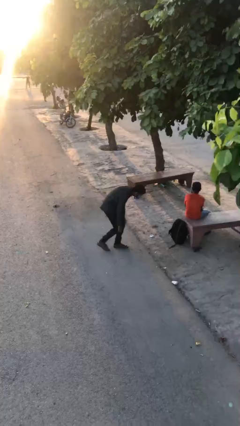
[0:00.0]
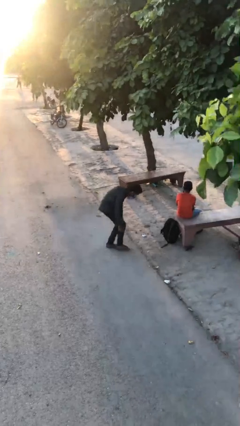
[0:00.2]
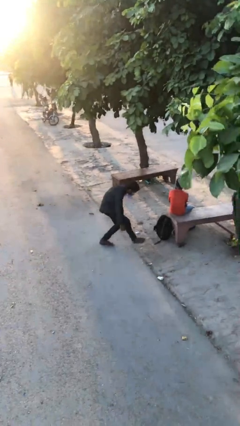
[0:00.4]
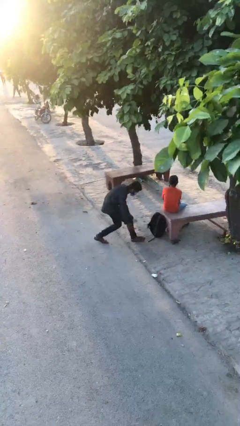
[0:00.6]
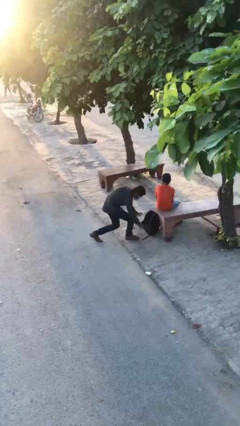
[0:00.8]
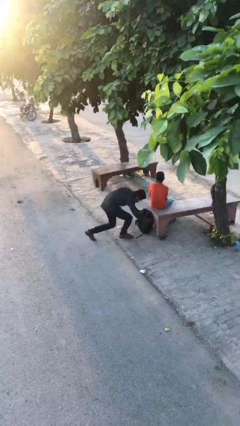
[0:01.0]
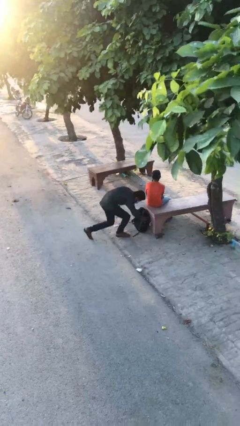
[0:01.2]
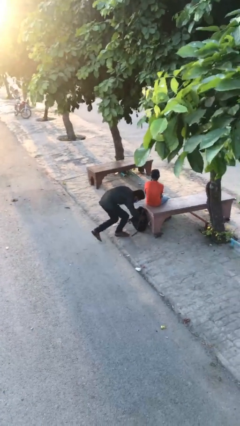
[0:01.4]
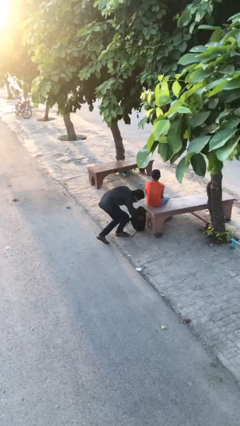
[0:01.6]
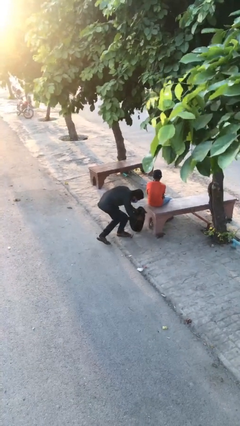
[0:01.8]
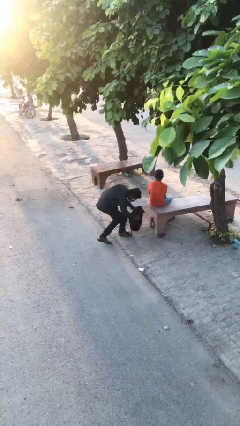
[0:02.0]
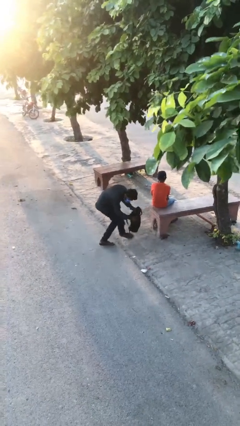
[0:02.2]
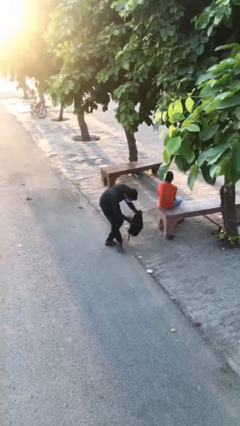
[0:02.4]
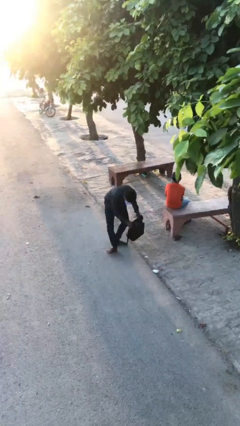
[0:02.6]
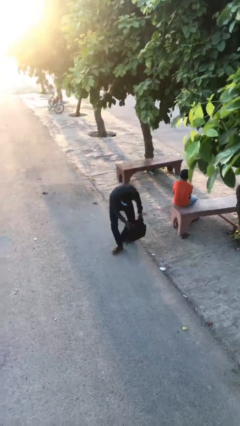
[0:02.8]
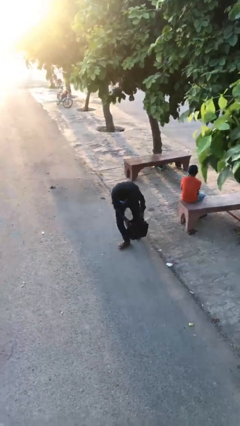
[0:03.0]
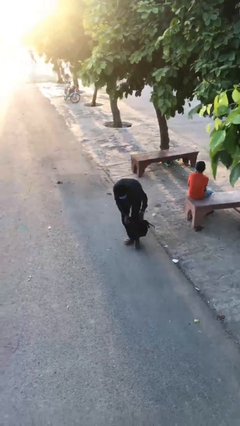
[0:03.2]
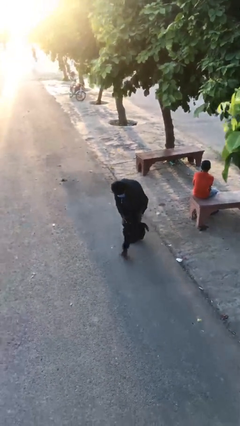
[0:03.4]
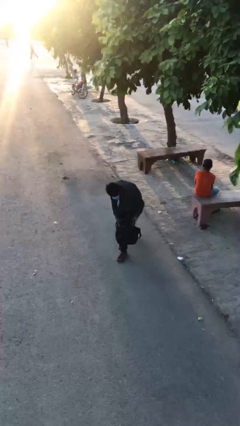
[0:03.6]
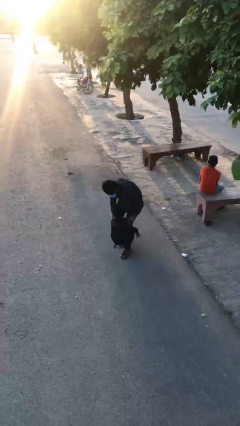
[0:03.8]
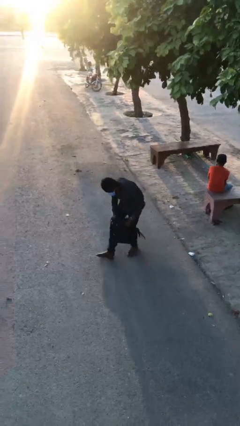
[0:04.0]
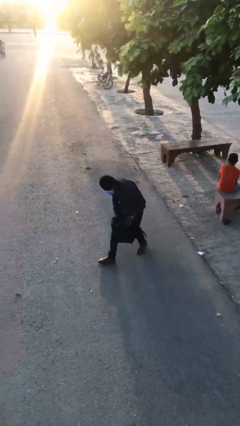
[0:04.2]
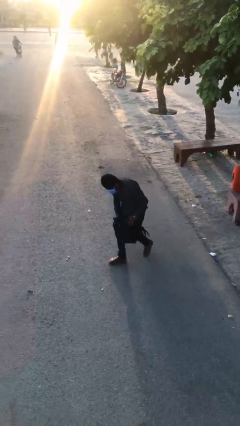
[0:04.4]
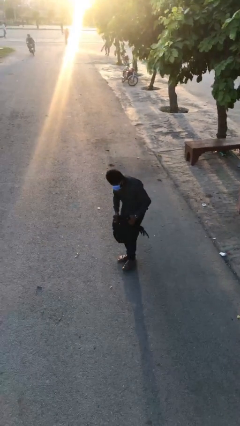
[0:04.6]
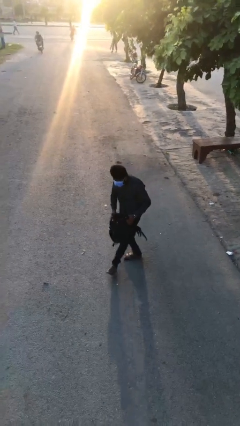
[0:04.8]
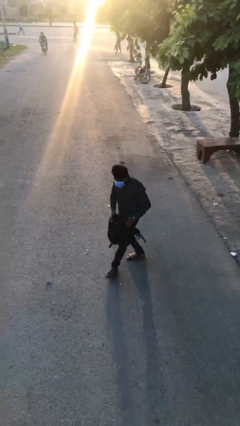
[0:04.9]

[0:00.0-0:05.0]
person steals object from person

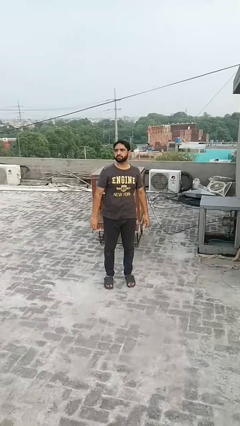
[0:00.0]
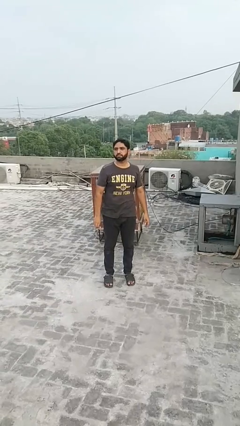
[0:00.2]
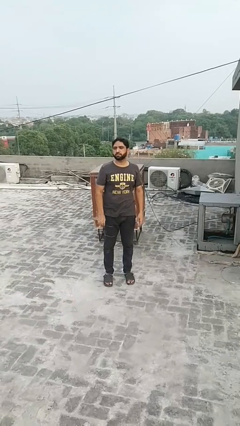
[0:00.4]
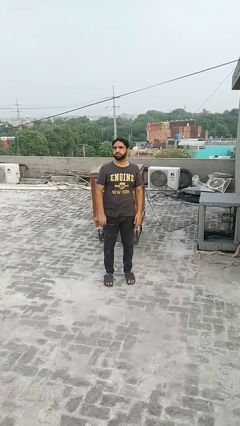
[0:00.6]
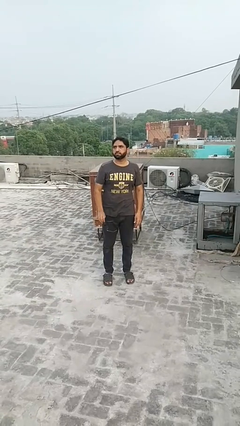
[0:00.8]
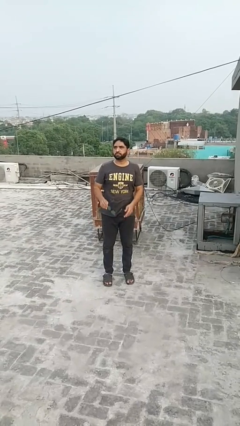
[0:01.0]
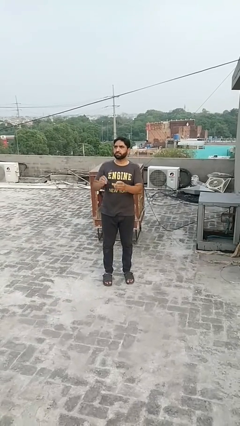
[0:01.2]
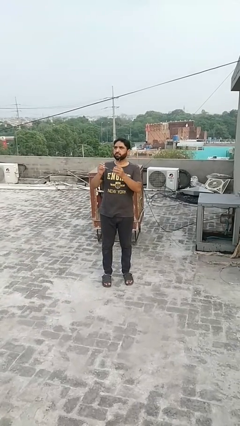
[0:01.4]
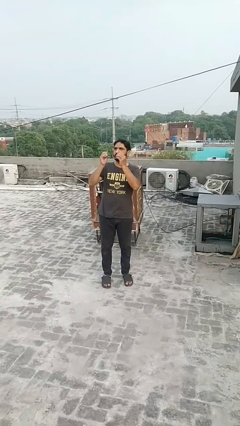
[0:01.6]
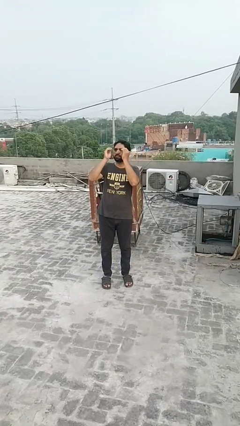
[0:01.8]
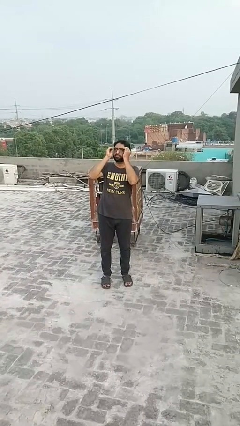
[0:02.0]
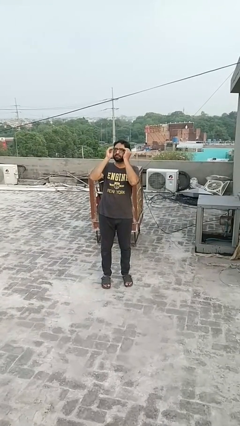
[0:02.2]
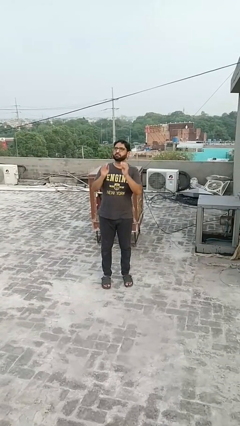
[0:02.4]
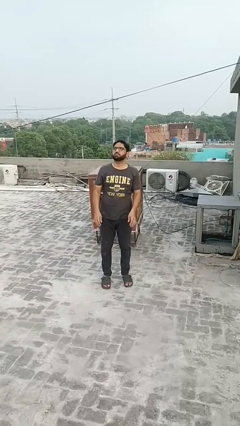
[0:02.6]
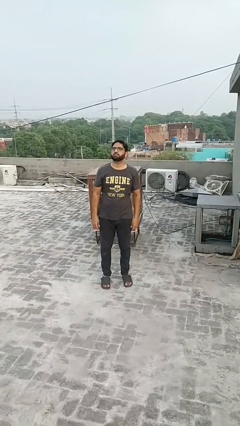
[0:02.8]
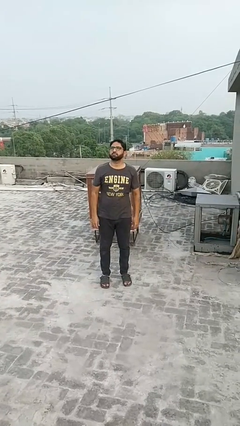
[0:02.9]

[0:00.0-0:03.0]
person puts on glasses

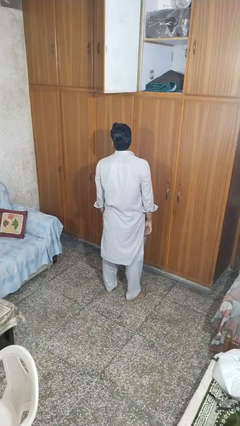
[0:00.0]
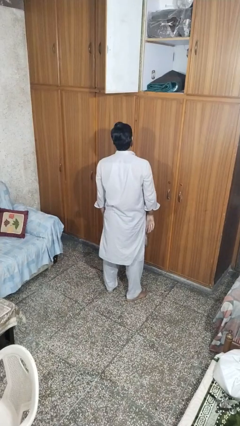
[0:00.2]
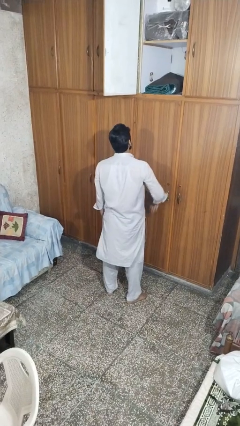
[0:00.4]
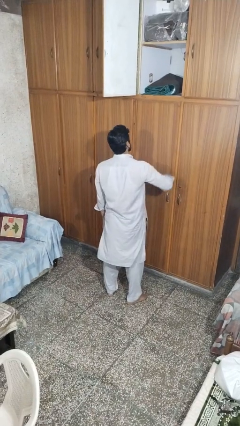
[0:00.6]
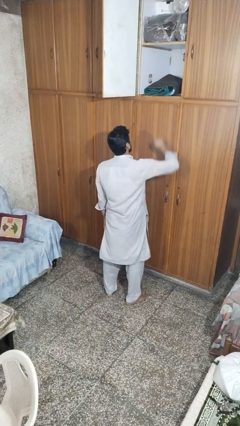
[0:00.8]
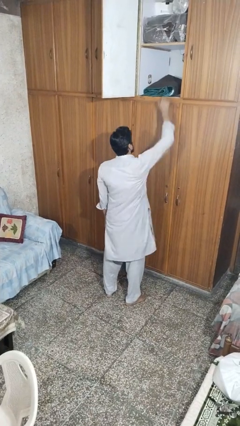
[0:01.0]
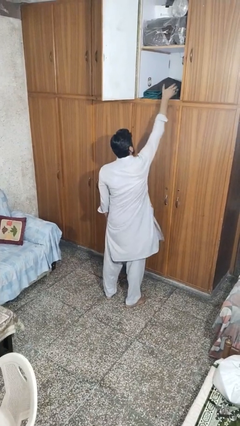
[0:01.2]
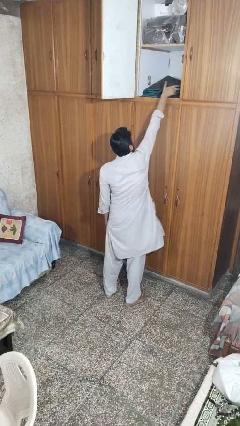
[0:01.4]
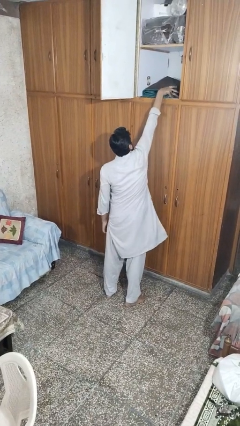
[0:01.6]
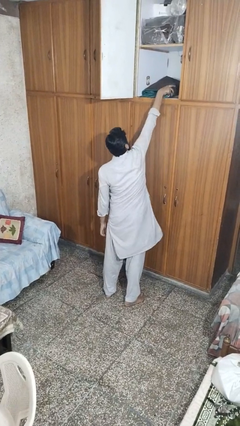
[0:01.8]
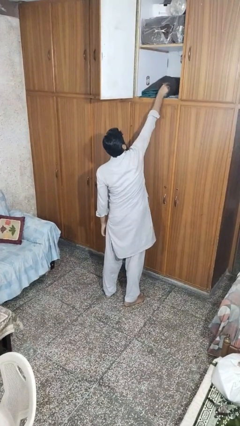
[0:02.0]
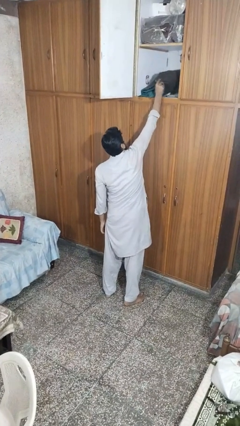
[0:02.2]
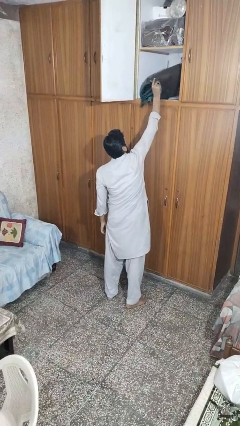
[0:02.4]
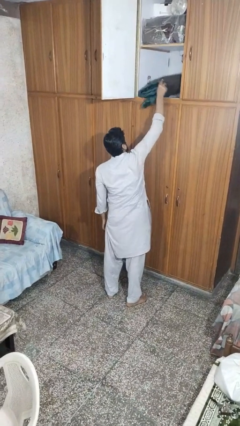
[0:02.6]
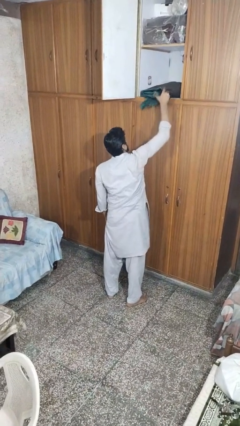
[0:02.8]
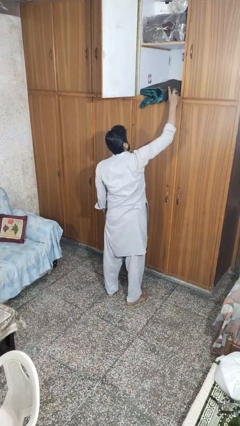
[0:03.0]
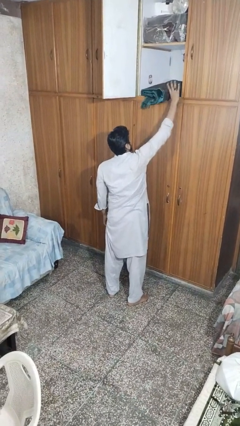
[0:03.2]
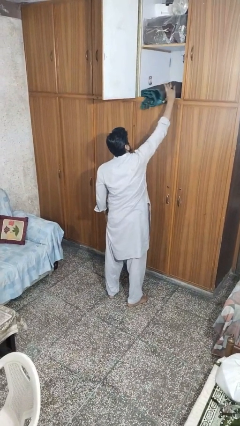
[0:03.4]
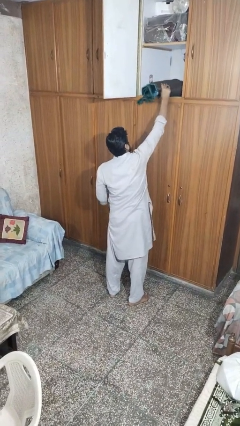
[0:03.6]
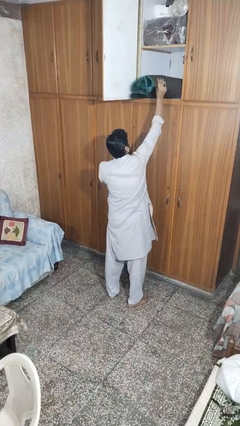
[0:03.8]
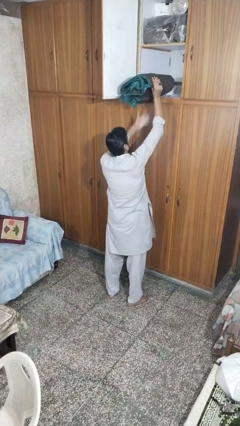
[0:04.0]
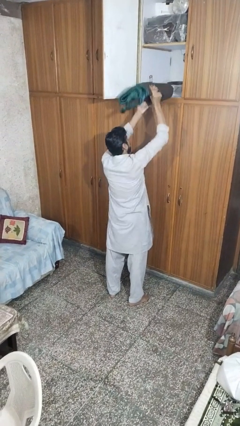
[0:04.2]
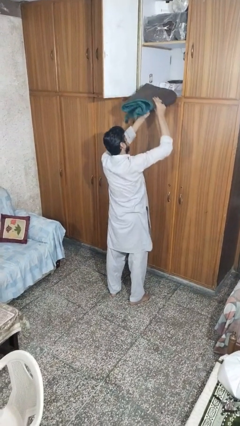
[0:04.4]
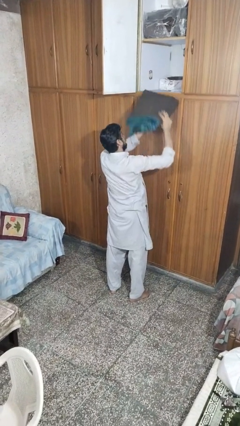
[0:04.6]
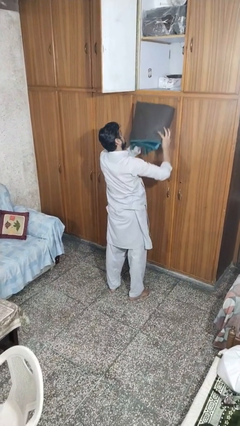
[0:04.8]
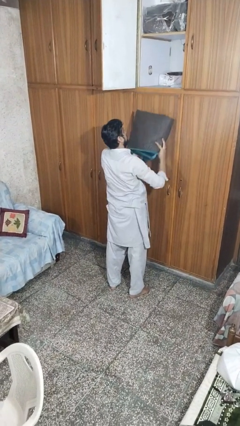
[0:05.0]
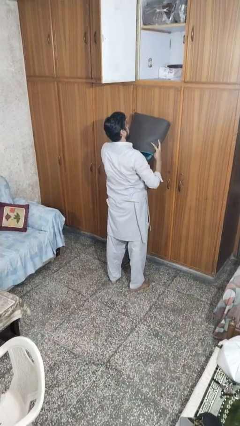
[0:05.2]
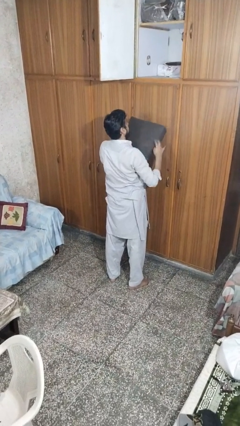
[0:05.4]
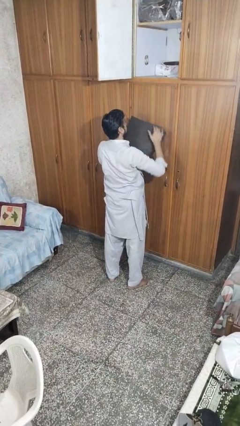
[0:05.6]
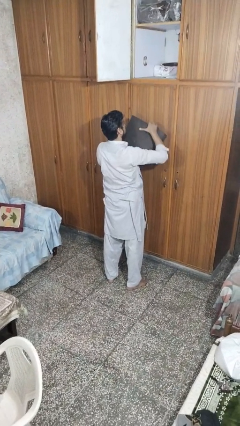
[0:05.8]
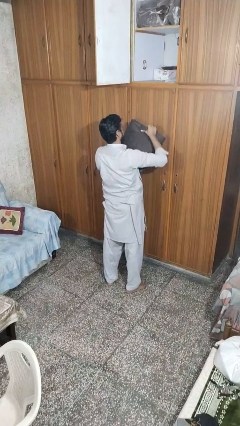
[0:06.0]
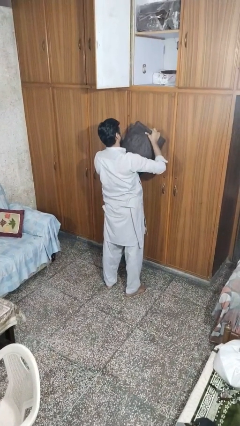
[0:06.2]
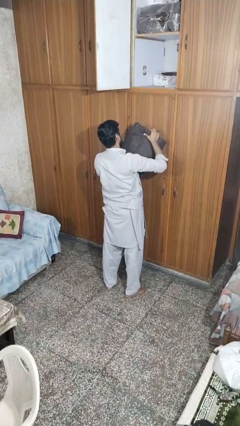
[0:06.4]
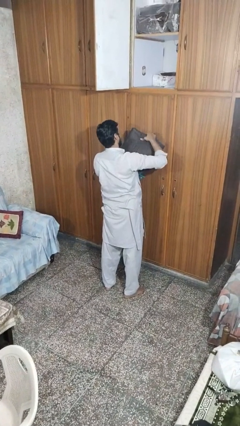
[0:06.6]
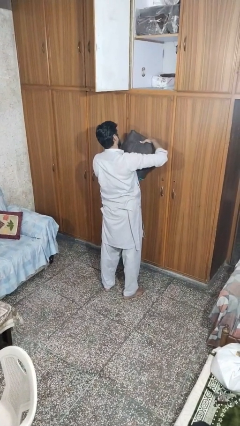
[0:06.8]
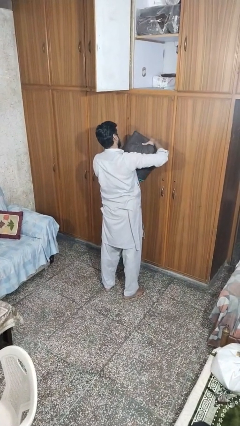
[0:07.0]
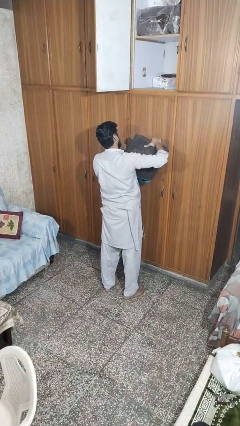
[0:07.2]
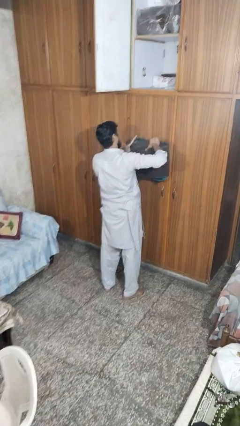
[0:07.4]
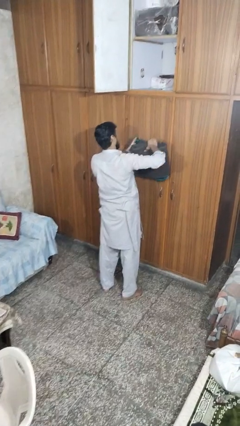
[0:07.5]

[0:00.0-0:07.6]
person picks up object from shelf

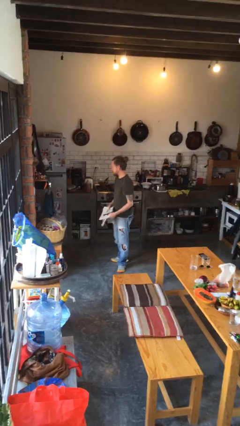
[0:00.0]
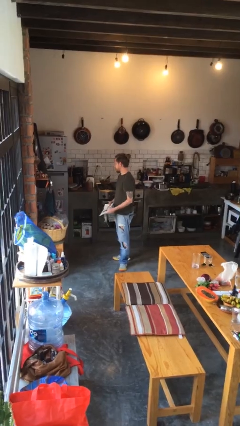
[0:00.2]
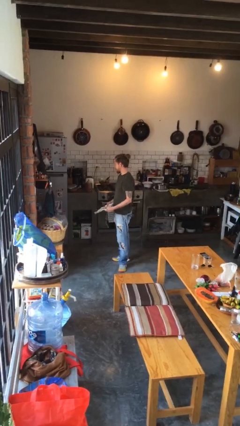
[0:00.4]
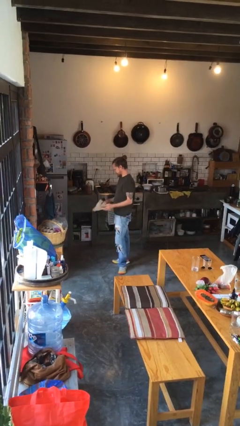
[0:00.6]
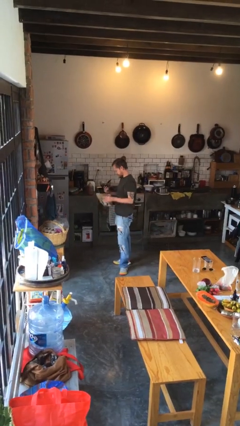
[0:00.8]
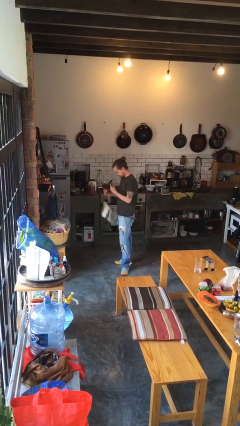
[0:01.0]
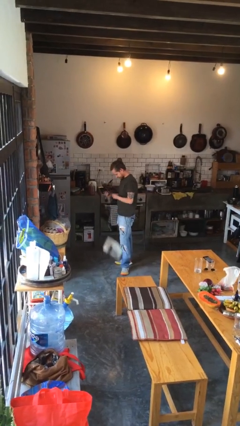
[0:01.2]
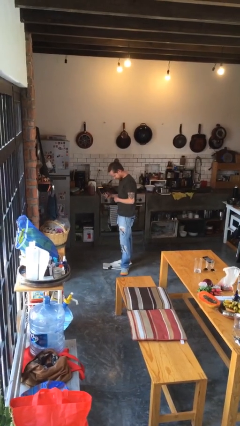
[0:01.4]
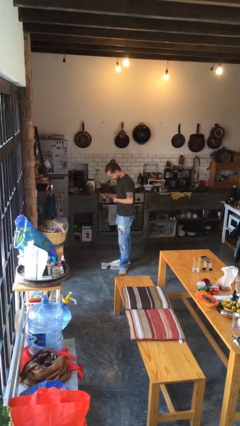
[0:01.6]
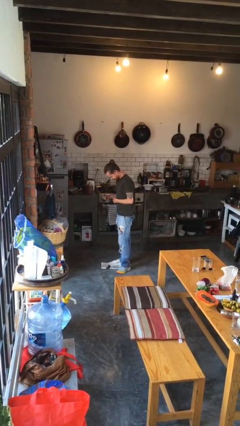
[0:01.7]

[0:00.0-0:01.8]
person drops object

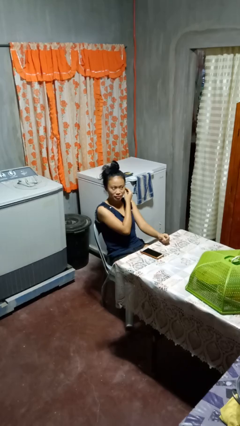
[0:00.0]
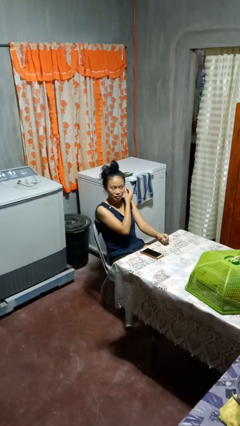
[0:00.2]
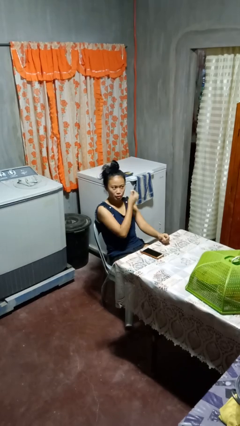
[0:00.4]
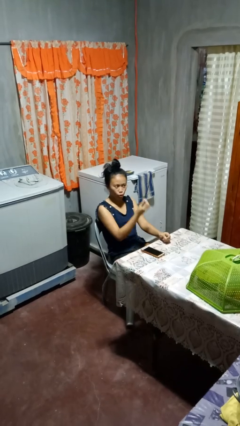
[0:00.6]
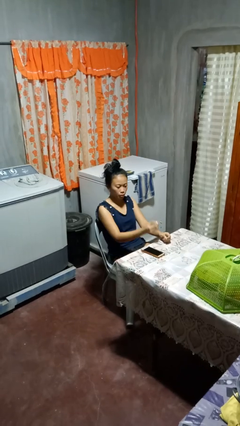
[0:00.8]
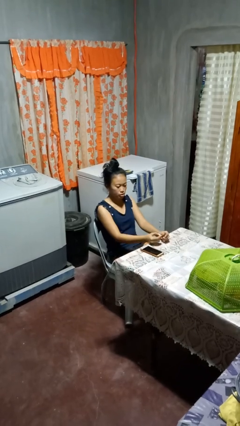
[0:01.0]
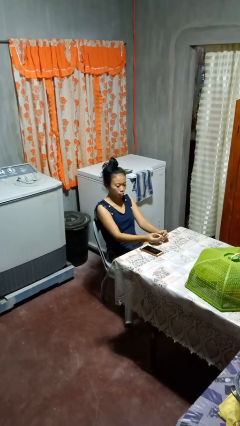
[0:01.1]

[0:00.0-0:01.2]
person takes off earrings
